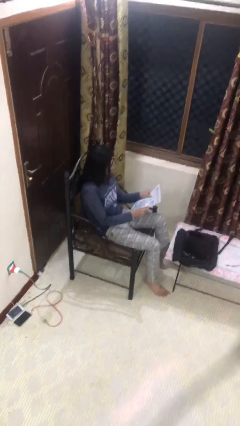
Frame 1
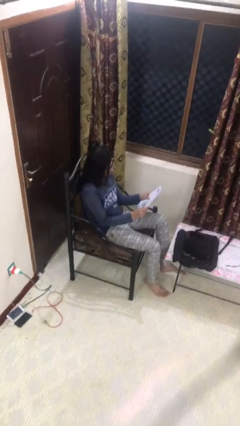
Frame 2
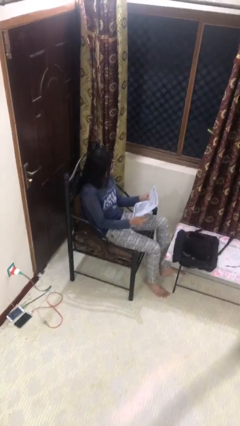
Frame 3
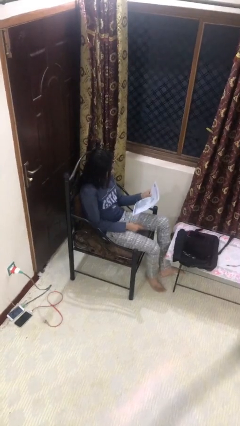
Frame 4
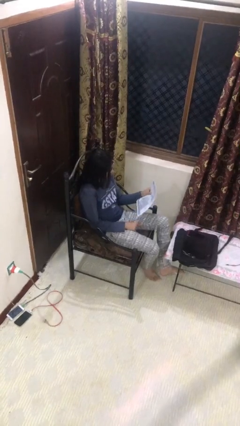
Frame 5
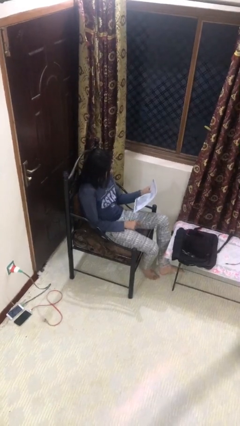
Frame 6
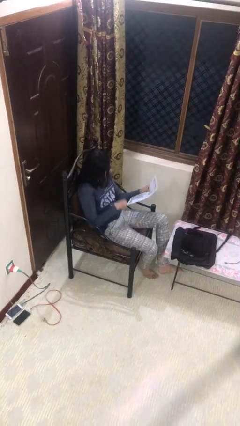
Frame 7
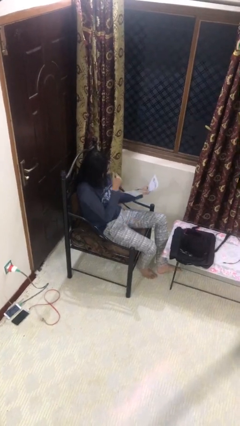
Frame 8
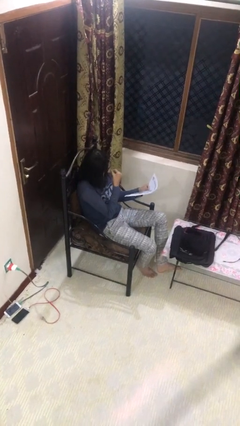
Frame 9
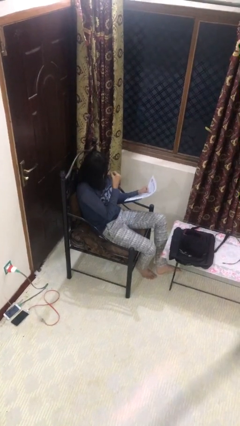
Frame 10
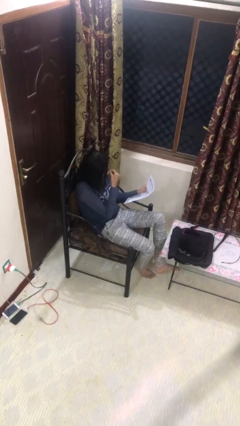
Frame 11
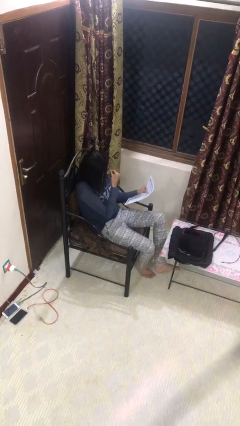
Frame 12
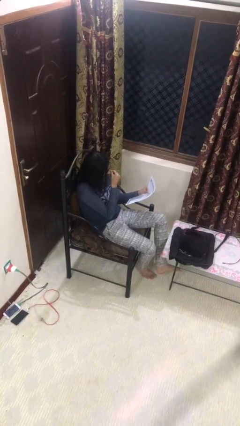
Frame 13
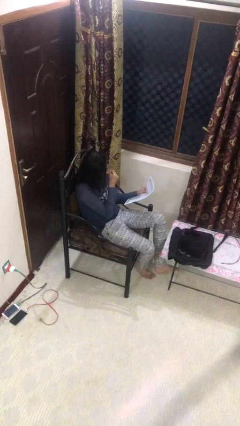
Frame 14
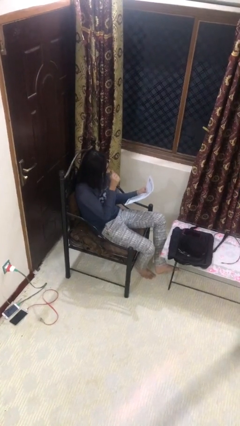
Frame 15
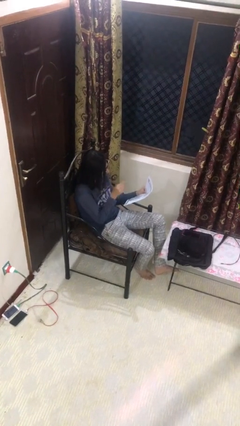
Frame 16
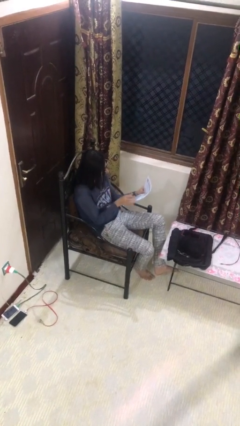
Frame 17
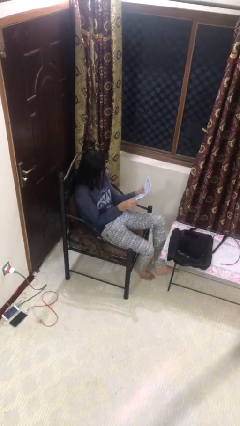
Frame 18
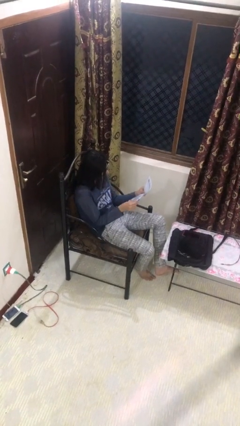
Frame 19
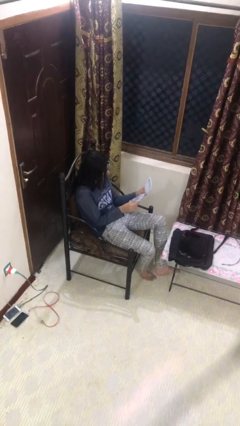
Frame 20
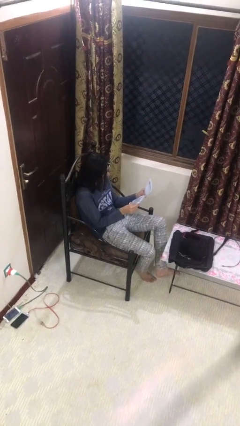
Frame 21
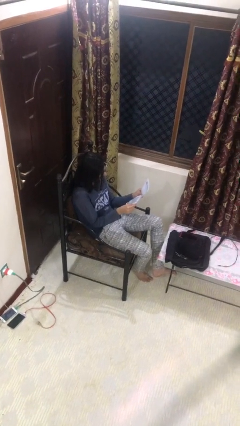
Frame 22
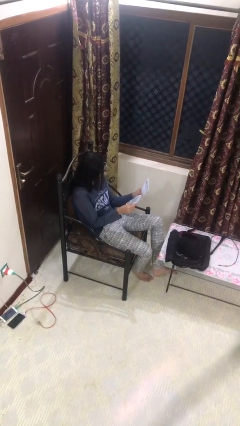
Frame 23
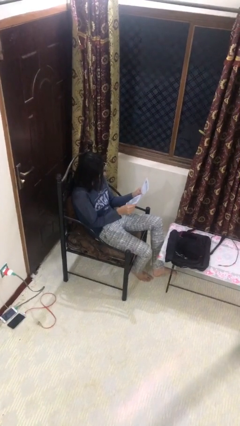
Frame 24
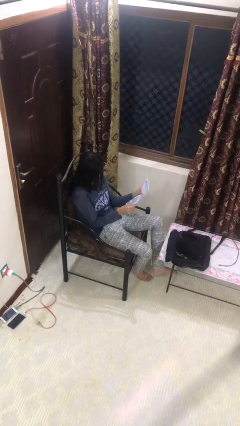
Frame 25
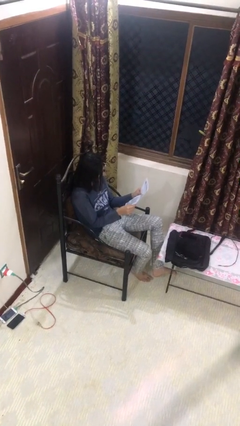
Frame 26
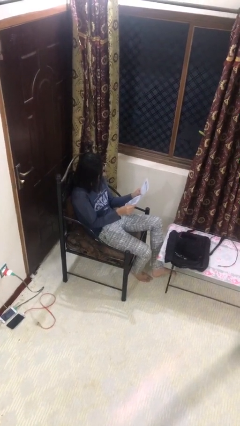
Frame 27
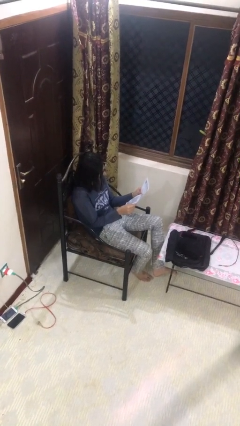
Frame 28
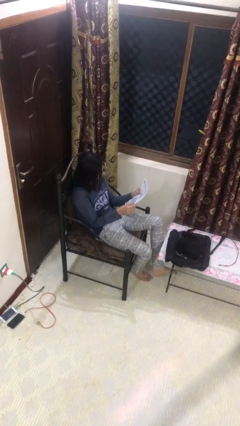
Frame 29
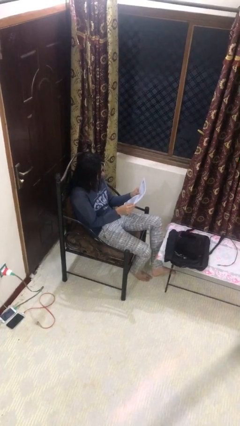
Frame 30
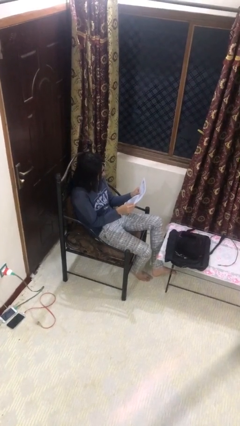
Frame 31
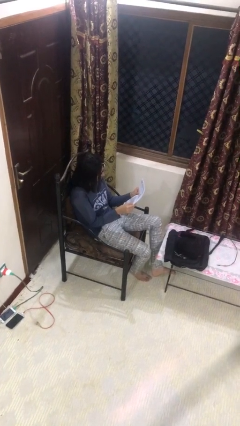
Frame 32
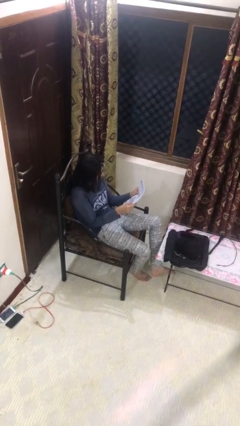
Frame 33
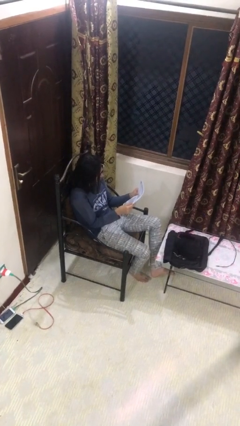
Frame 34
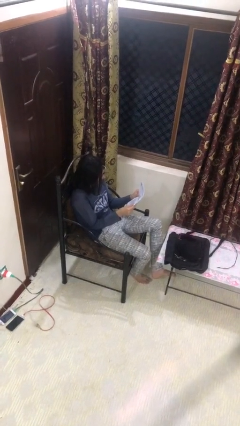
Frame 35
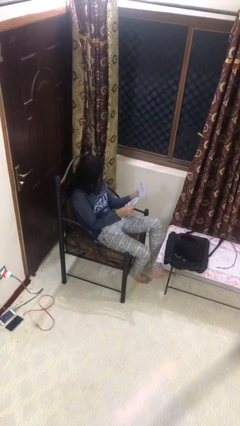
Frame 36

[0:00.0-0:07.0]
person reads document

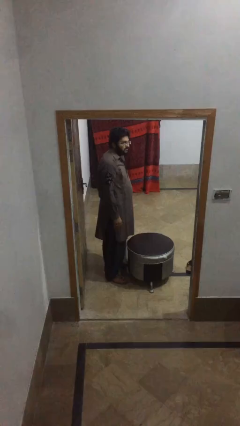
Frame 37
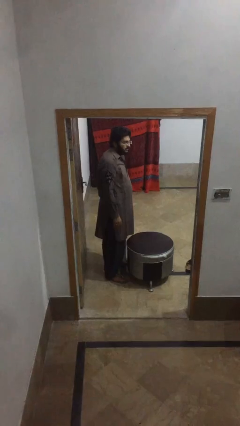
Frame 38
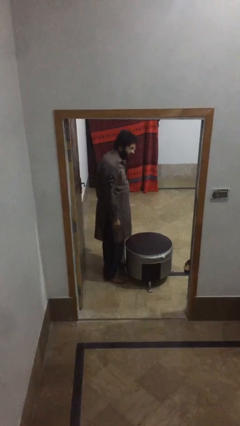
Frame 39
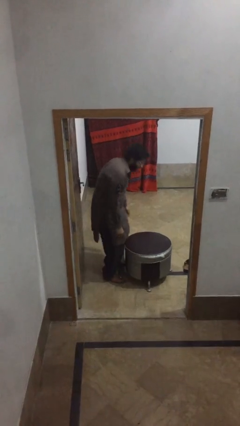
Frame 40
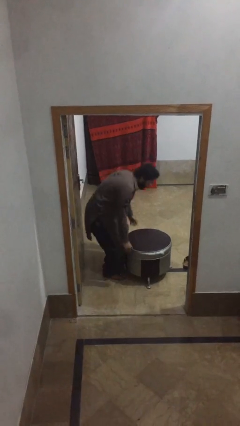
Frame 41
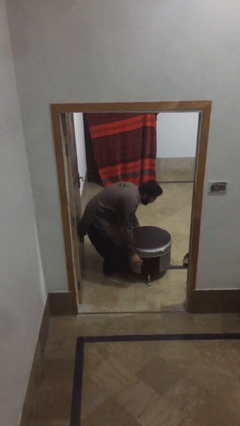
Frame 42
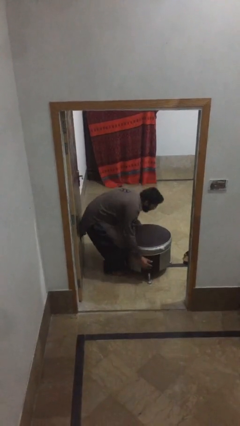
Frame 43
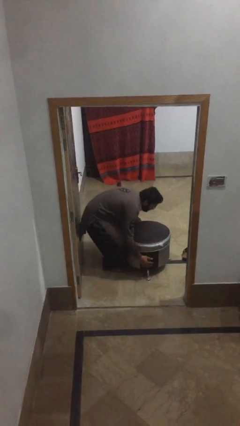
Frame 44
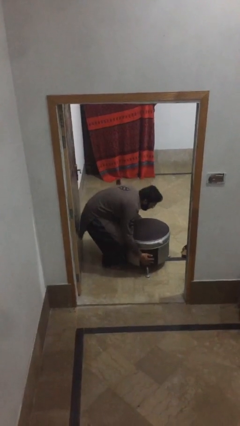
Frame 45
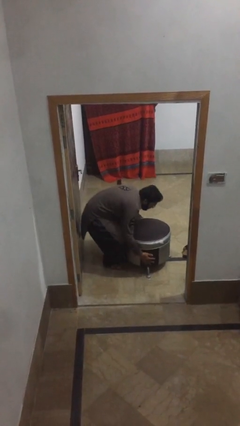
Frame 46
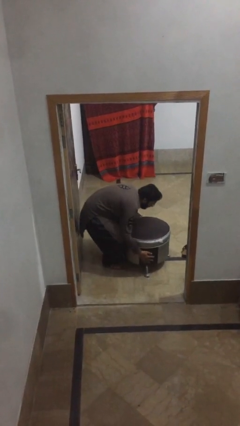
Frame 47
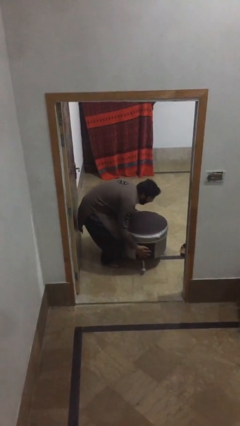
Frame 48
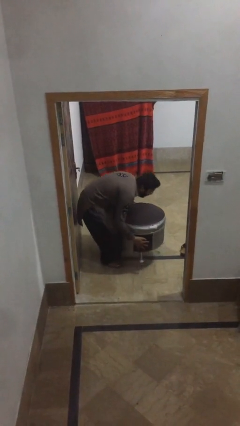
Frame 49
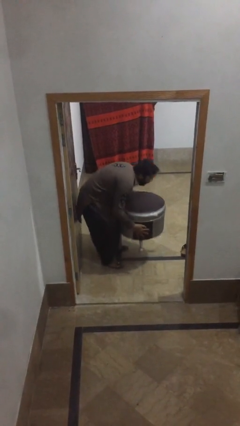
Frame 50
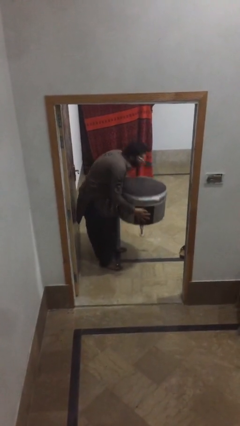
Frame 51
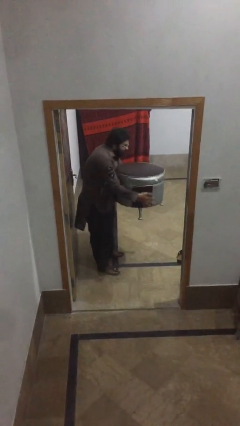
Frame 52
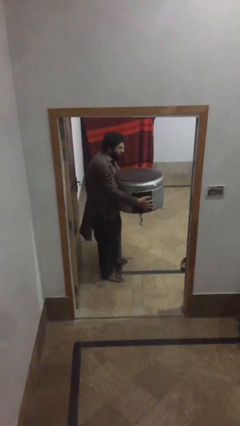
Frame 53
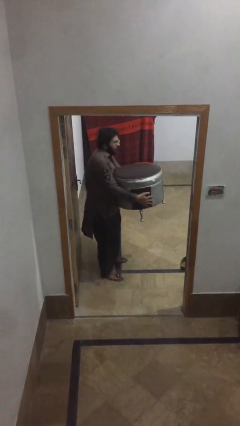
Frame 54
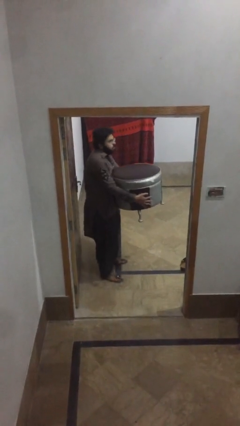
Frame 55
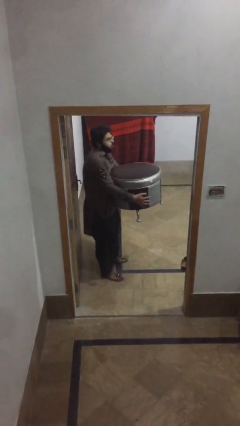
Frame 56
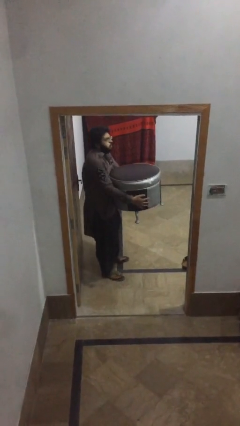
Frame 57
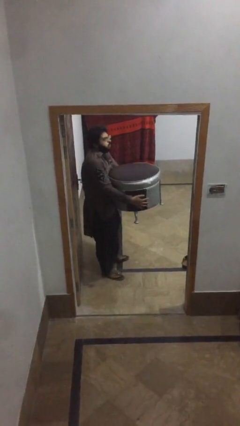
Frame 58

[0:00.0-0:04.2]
person picks up object from floor

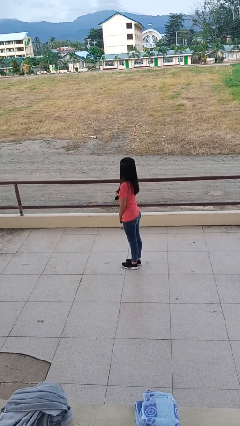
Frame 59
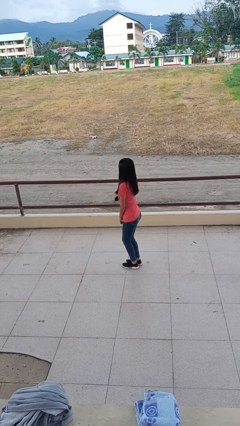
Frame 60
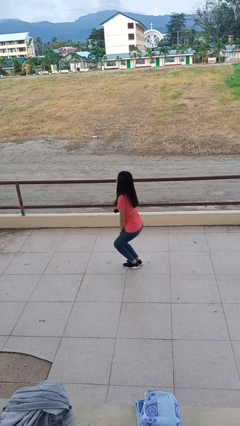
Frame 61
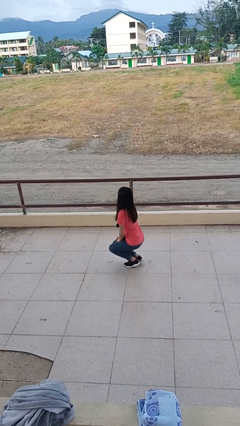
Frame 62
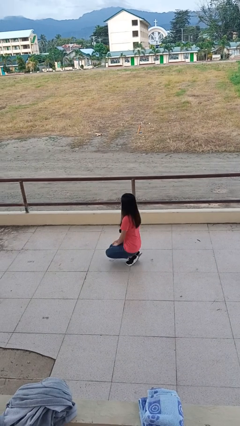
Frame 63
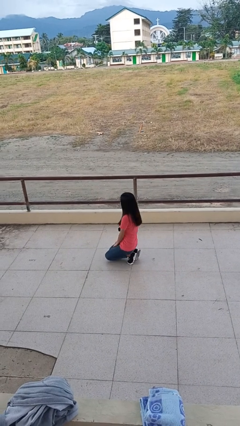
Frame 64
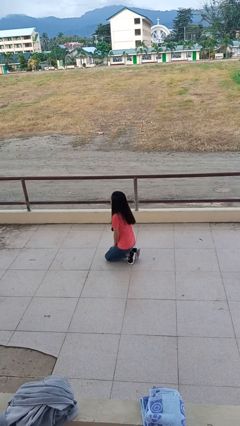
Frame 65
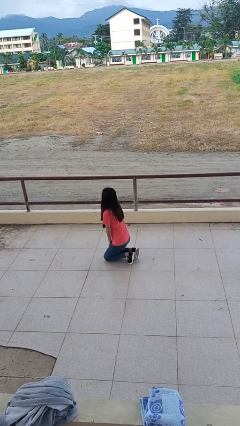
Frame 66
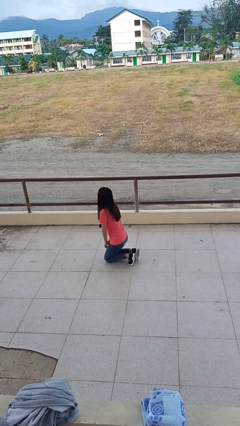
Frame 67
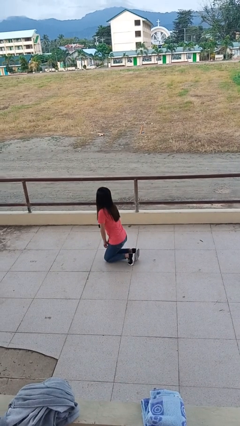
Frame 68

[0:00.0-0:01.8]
person kneels

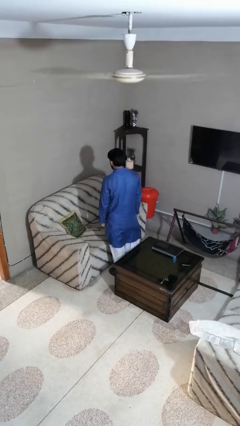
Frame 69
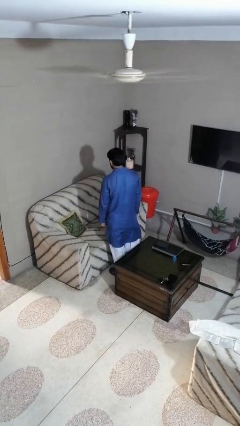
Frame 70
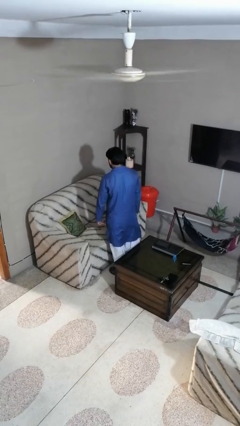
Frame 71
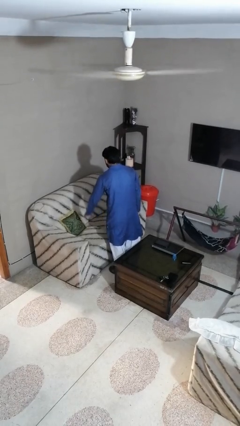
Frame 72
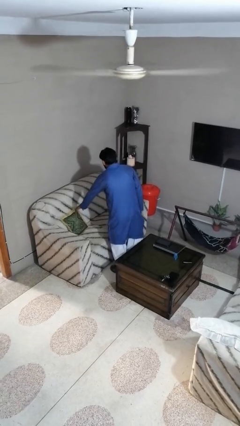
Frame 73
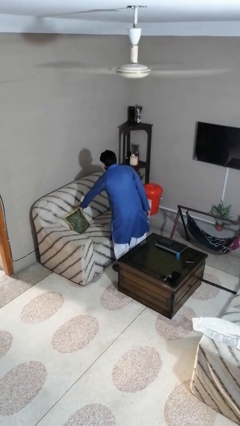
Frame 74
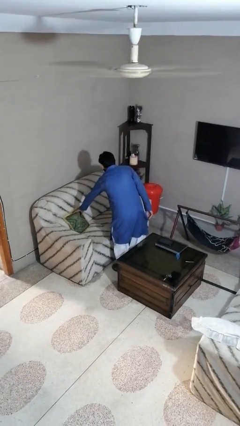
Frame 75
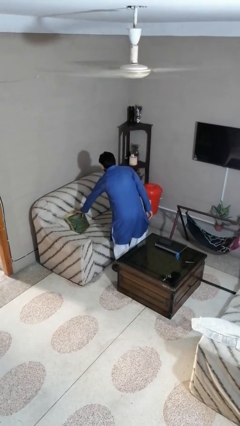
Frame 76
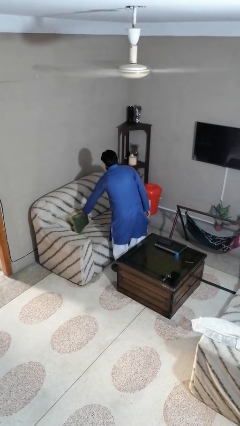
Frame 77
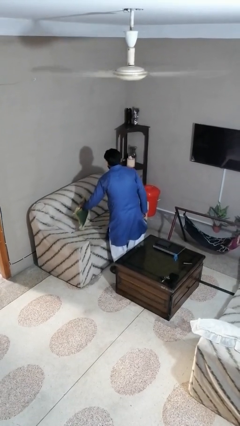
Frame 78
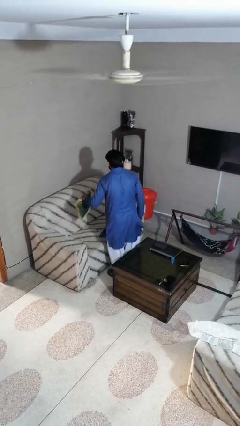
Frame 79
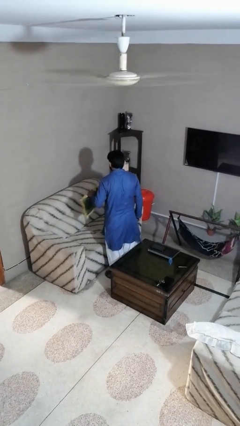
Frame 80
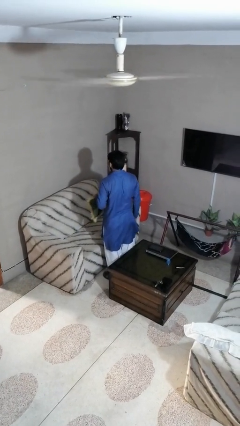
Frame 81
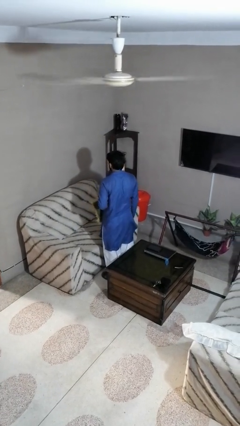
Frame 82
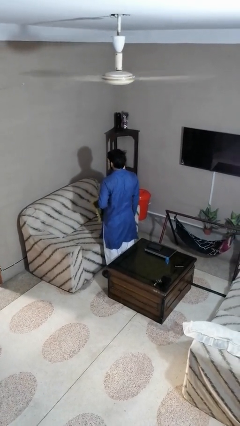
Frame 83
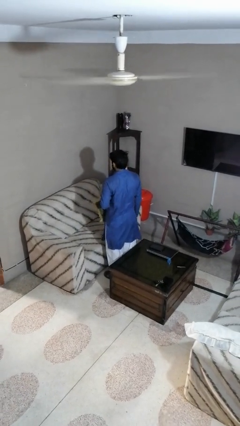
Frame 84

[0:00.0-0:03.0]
person picks up object from couch

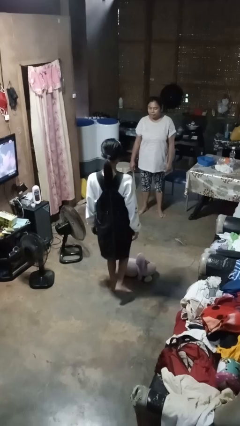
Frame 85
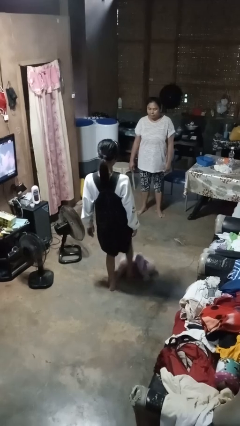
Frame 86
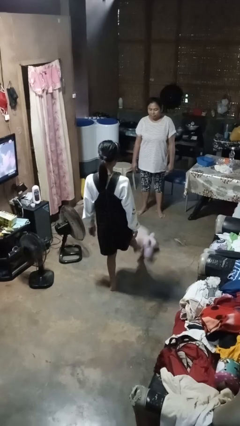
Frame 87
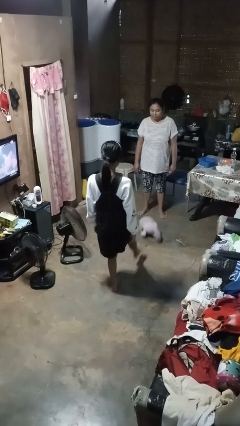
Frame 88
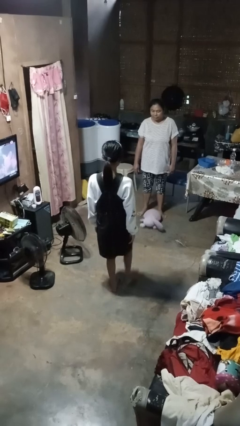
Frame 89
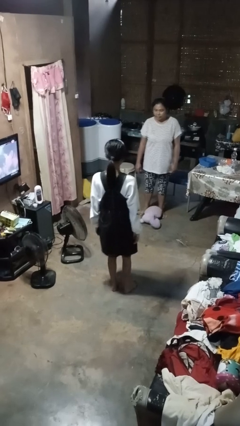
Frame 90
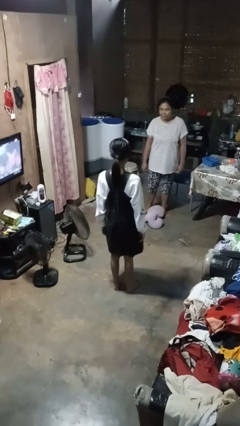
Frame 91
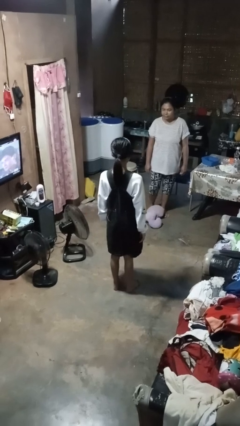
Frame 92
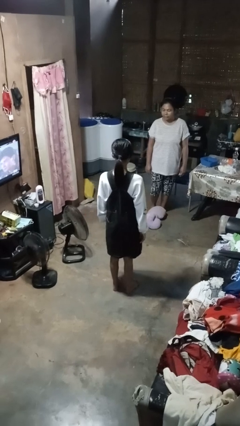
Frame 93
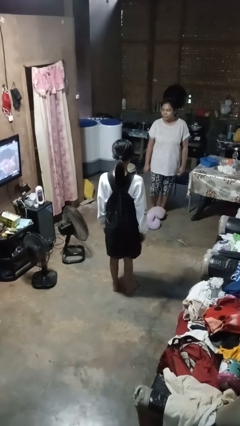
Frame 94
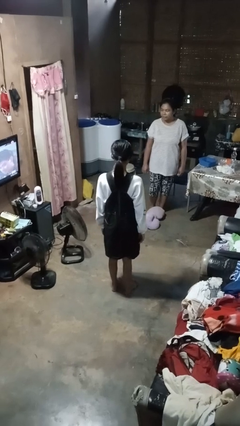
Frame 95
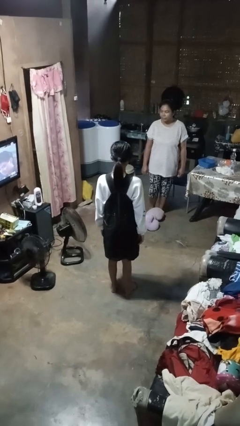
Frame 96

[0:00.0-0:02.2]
person kicks object to person
